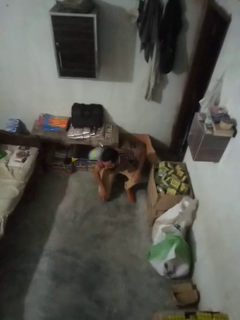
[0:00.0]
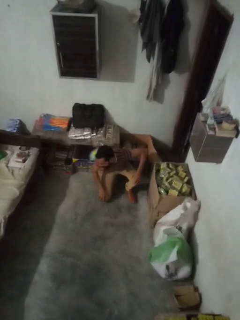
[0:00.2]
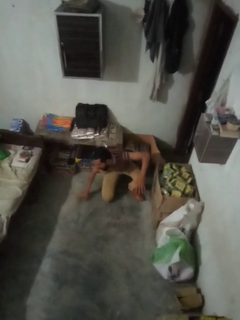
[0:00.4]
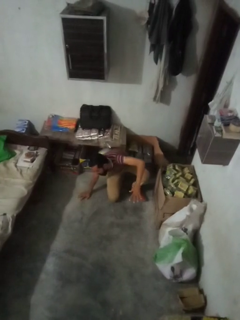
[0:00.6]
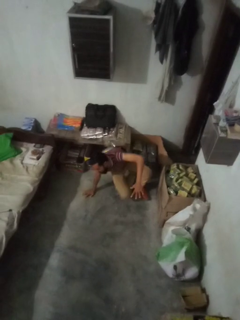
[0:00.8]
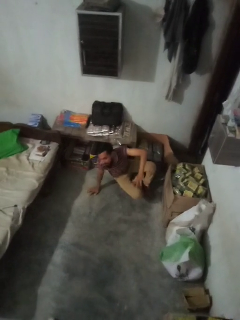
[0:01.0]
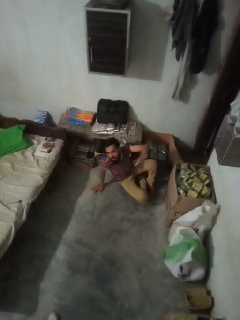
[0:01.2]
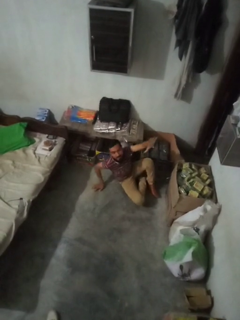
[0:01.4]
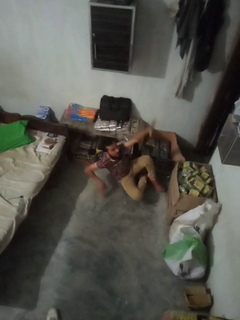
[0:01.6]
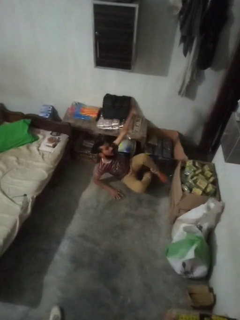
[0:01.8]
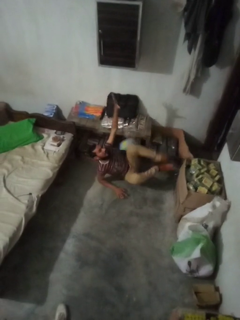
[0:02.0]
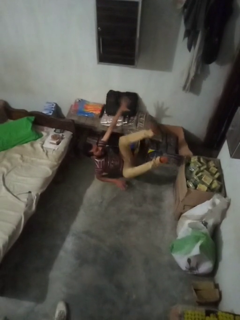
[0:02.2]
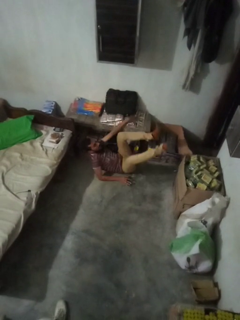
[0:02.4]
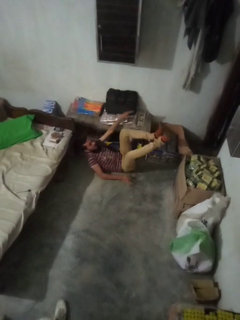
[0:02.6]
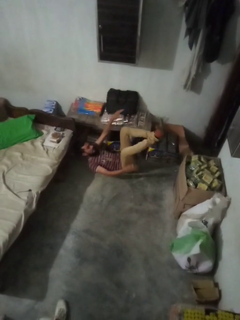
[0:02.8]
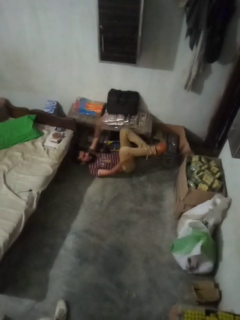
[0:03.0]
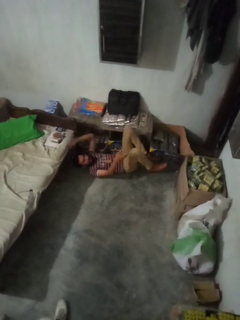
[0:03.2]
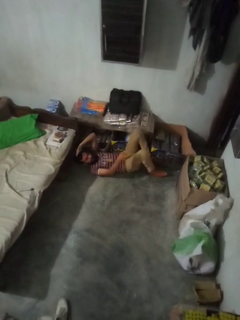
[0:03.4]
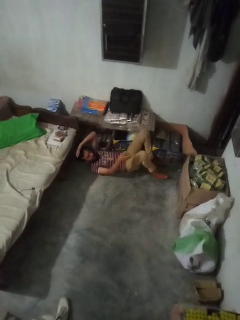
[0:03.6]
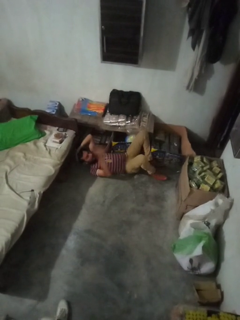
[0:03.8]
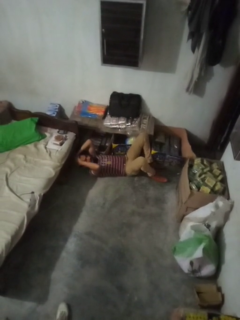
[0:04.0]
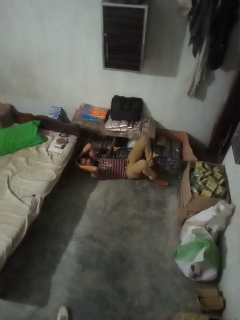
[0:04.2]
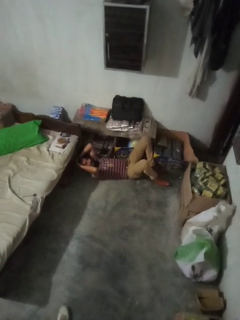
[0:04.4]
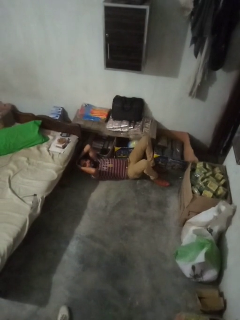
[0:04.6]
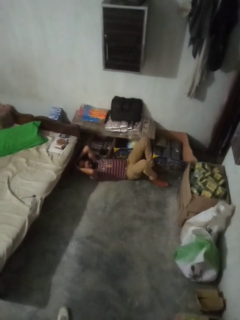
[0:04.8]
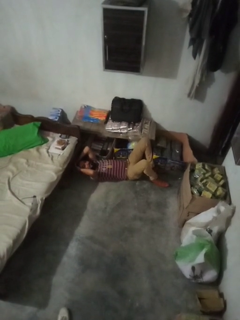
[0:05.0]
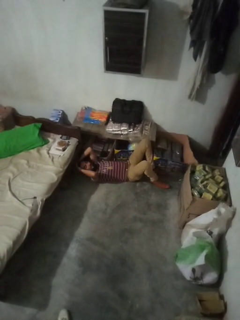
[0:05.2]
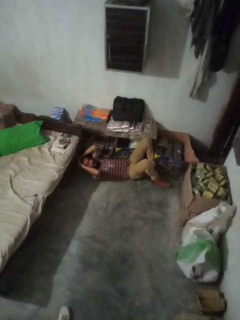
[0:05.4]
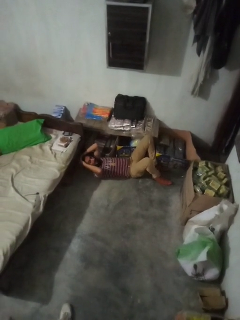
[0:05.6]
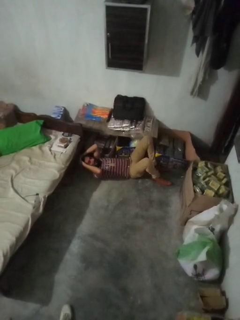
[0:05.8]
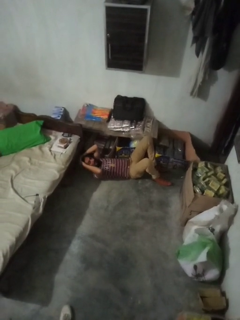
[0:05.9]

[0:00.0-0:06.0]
person lies down on floor

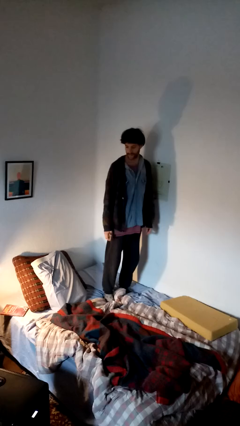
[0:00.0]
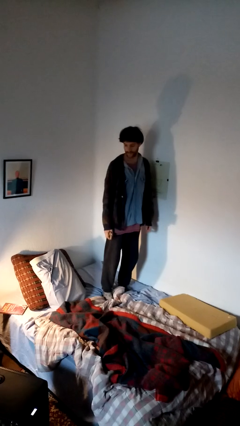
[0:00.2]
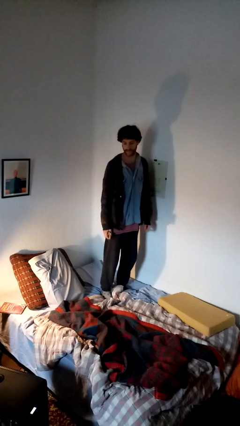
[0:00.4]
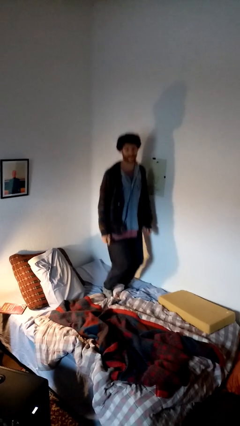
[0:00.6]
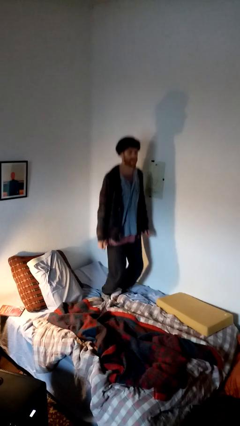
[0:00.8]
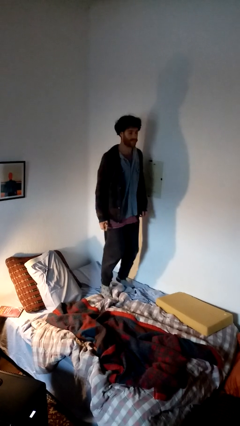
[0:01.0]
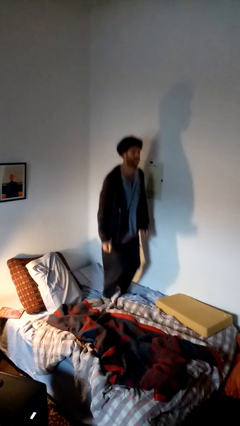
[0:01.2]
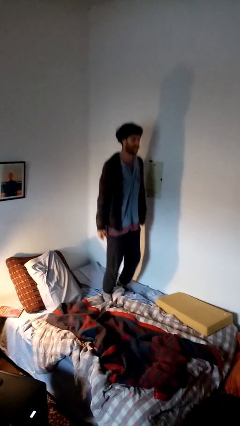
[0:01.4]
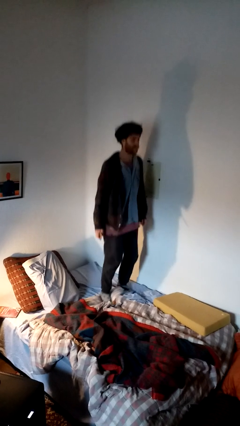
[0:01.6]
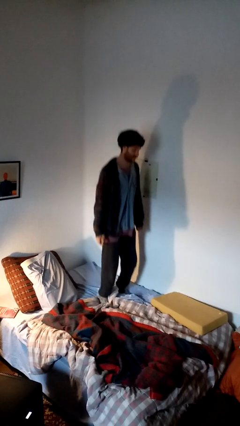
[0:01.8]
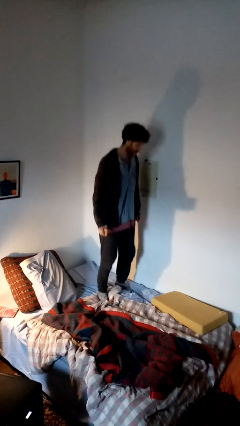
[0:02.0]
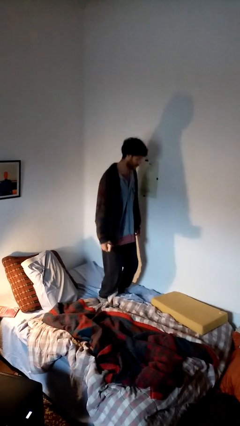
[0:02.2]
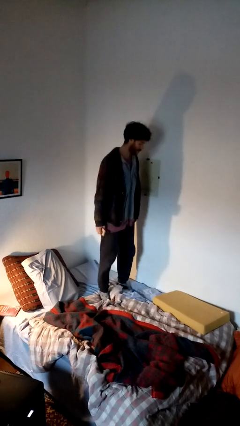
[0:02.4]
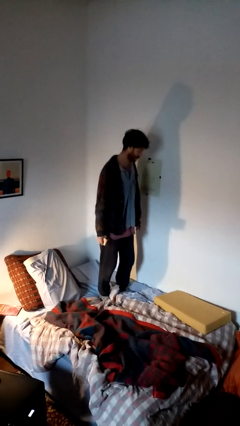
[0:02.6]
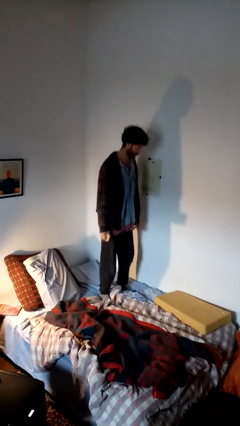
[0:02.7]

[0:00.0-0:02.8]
person jumps on bed

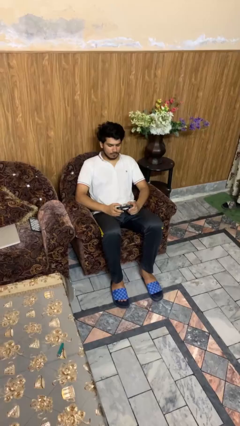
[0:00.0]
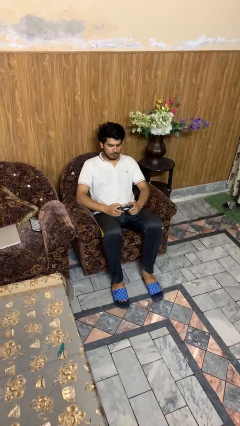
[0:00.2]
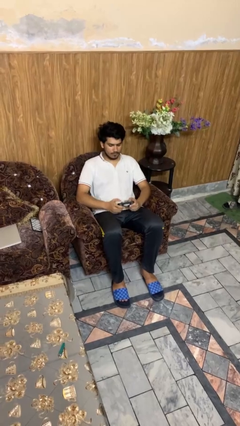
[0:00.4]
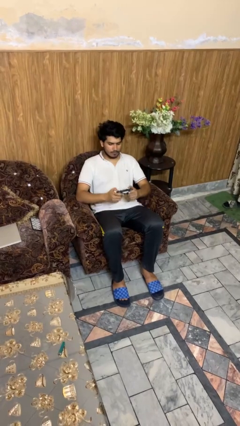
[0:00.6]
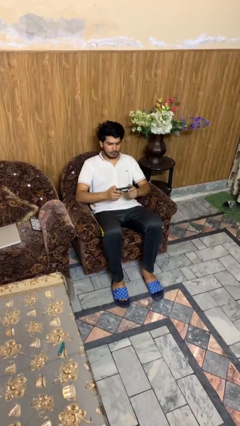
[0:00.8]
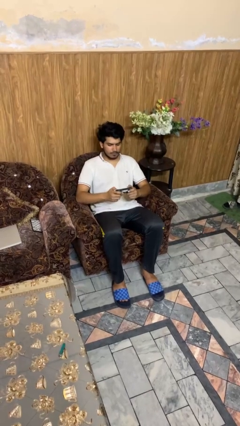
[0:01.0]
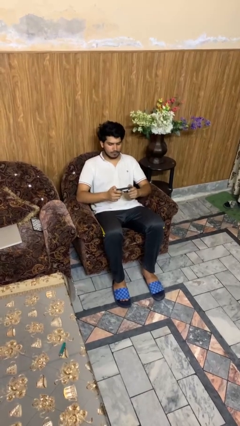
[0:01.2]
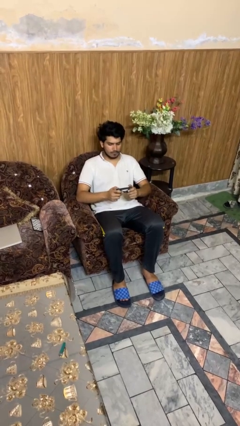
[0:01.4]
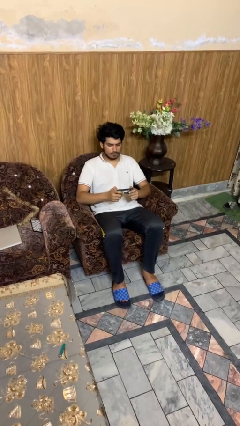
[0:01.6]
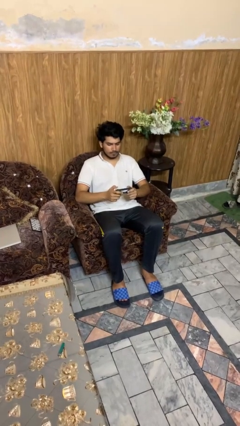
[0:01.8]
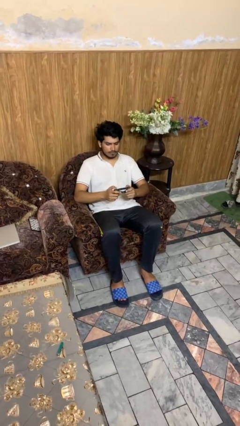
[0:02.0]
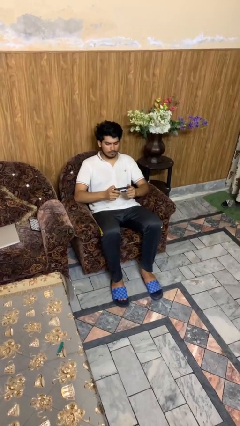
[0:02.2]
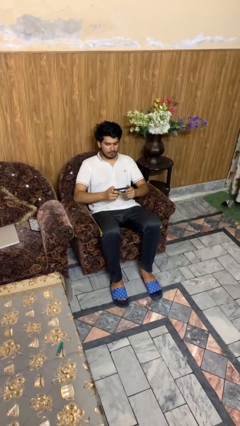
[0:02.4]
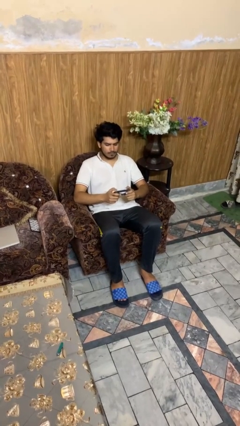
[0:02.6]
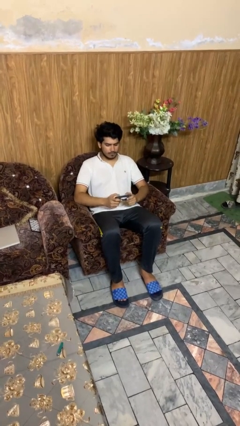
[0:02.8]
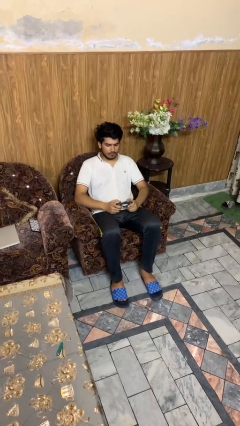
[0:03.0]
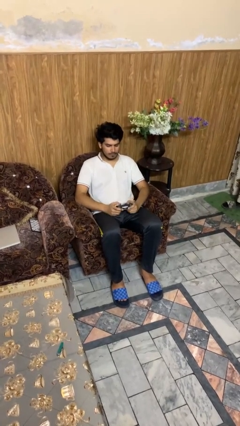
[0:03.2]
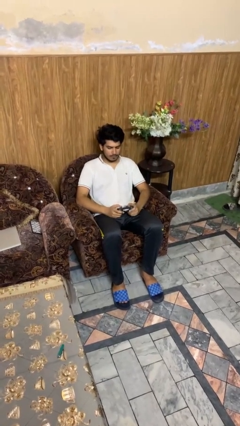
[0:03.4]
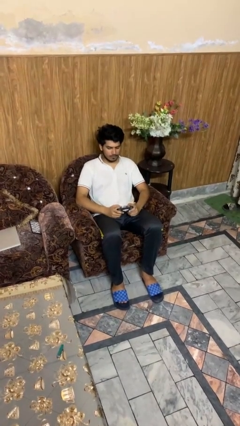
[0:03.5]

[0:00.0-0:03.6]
person interacts with handheld game

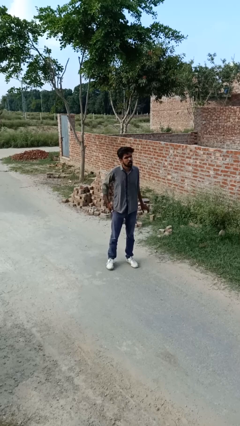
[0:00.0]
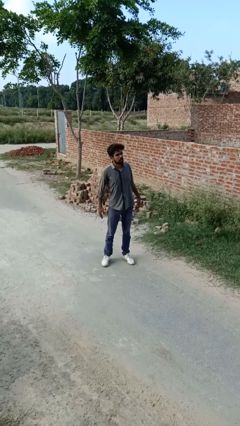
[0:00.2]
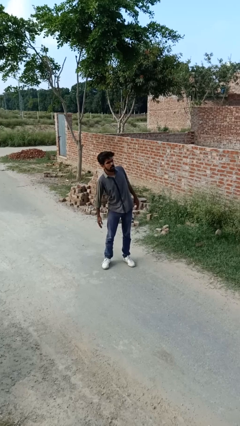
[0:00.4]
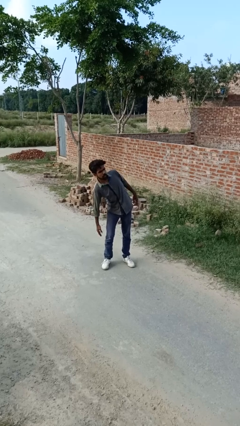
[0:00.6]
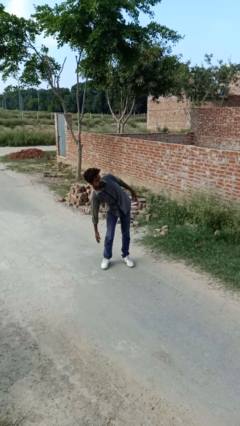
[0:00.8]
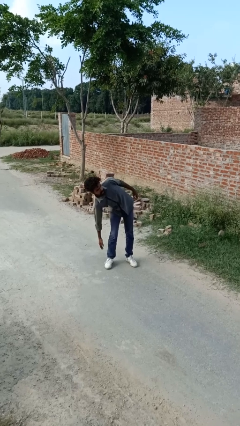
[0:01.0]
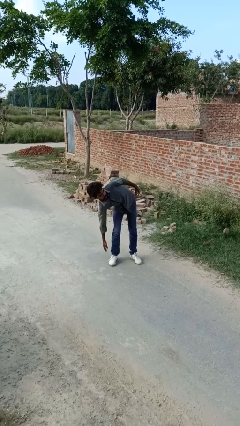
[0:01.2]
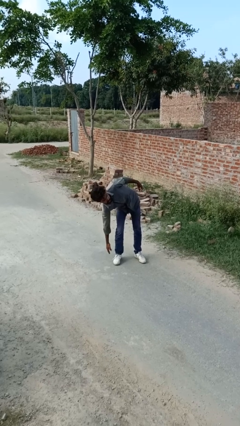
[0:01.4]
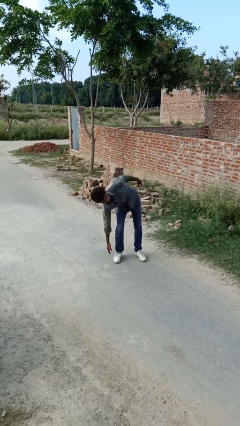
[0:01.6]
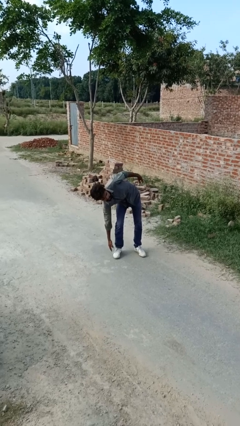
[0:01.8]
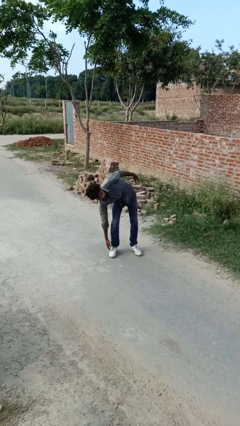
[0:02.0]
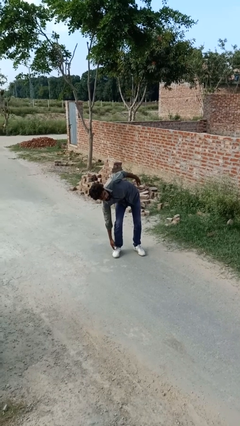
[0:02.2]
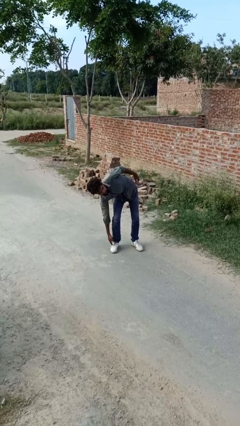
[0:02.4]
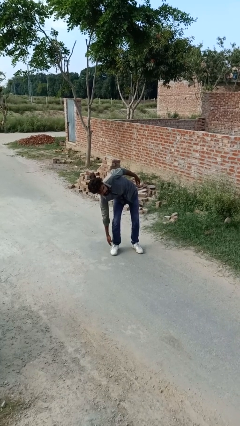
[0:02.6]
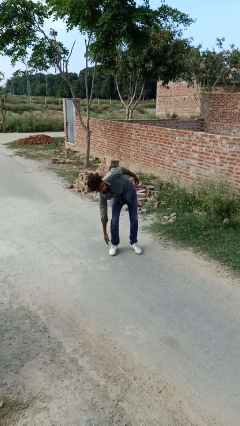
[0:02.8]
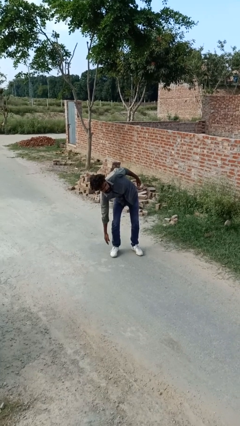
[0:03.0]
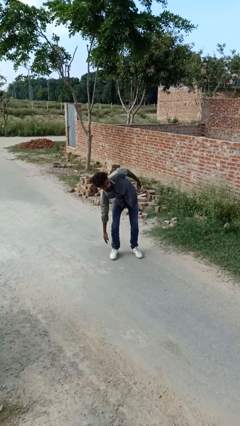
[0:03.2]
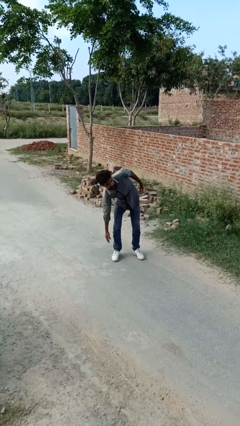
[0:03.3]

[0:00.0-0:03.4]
person stretches arms to side

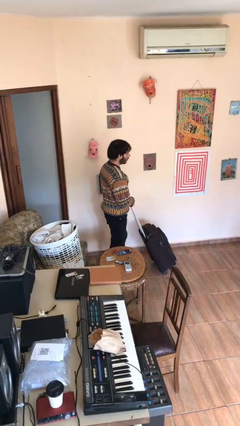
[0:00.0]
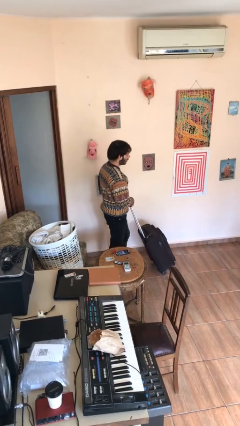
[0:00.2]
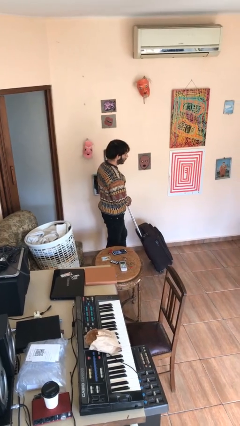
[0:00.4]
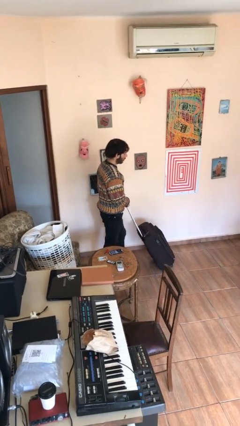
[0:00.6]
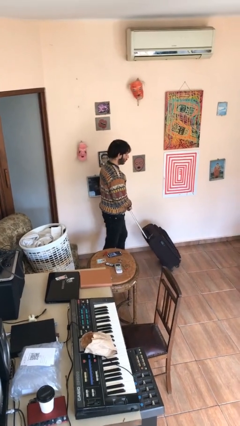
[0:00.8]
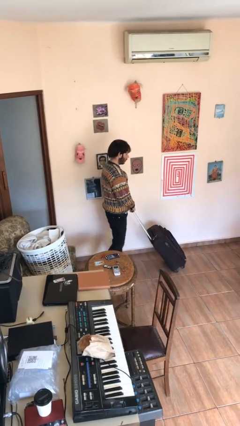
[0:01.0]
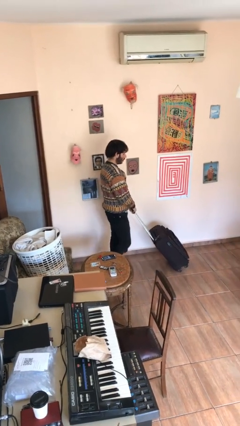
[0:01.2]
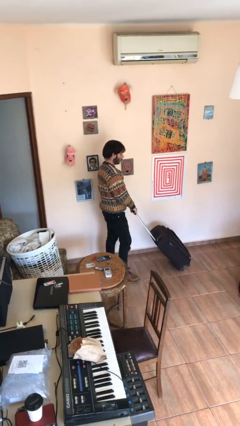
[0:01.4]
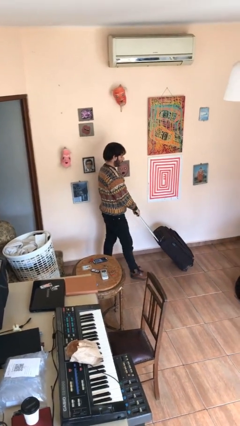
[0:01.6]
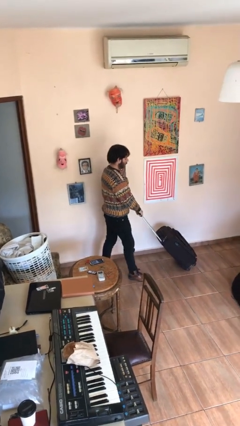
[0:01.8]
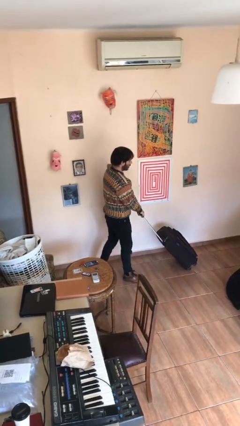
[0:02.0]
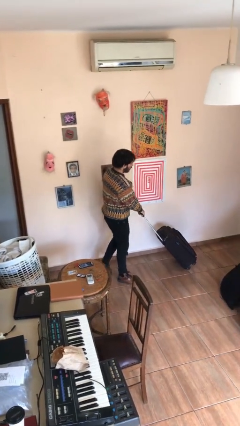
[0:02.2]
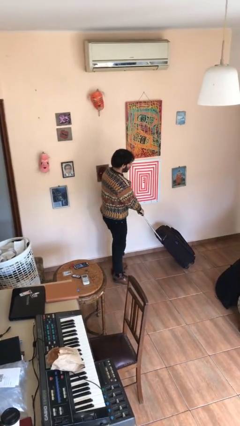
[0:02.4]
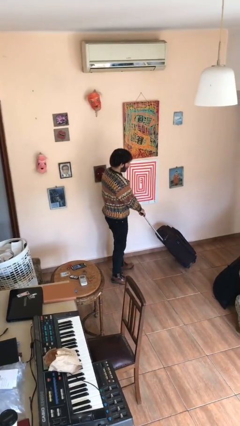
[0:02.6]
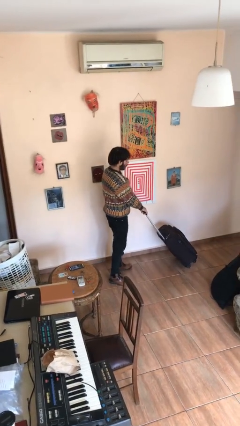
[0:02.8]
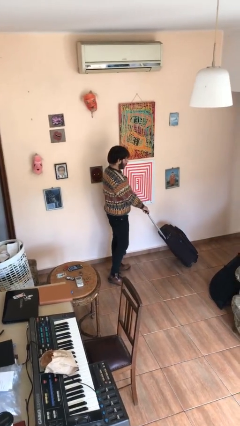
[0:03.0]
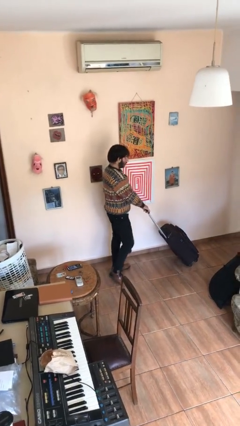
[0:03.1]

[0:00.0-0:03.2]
person pushes wheeled cart
